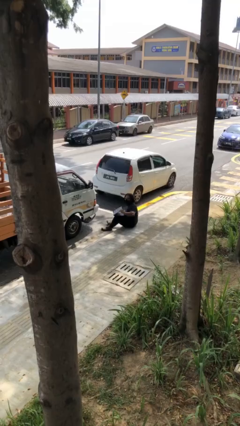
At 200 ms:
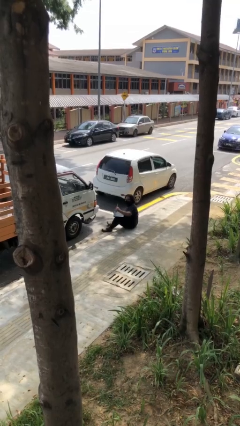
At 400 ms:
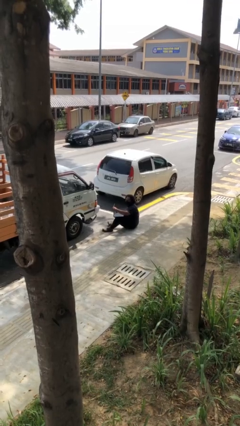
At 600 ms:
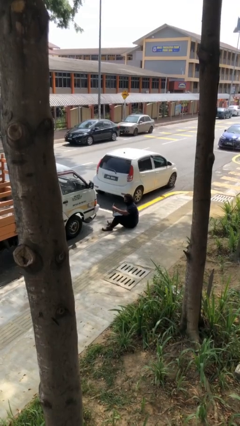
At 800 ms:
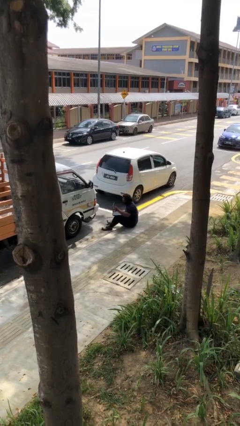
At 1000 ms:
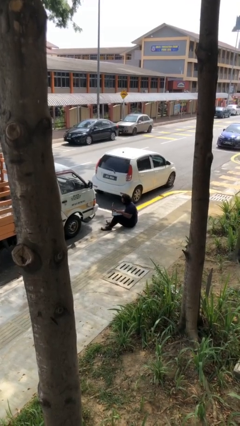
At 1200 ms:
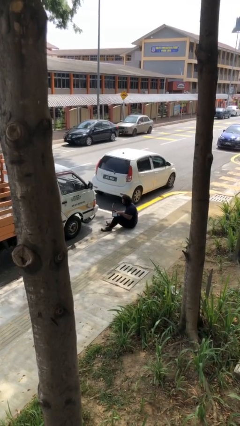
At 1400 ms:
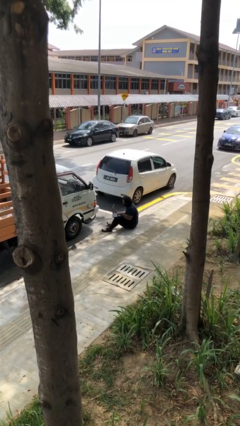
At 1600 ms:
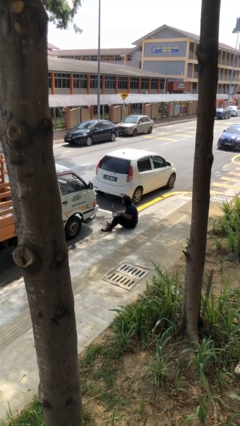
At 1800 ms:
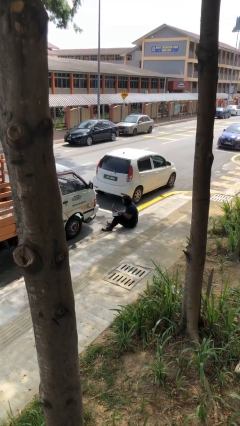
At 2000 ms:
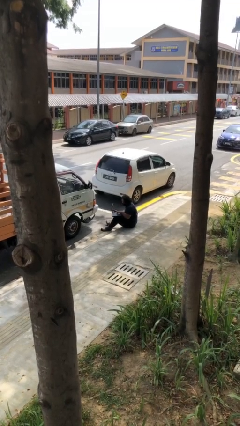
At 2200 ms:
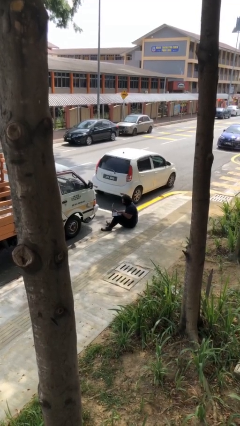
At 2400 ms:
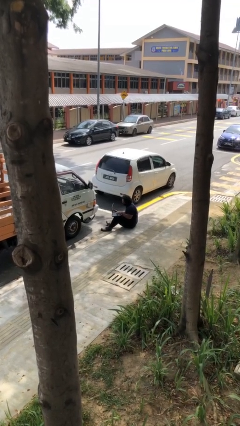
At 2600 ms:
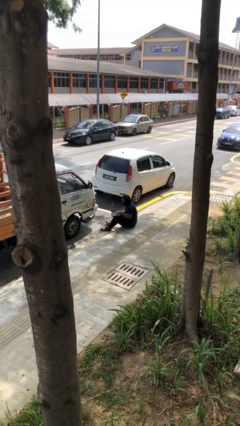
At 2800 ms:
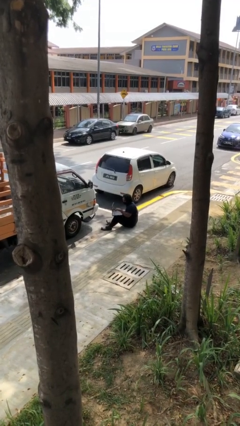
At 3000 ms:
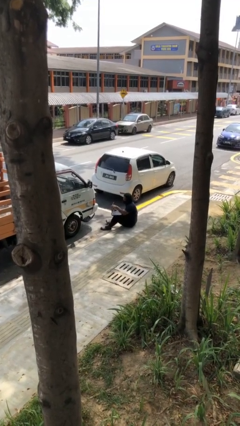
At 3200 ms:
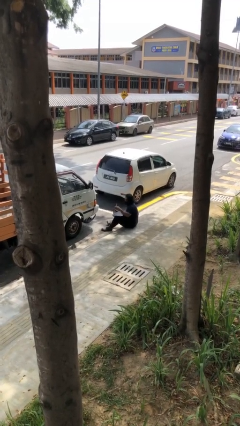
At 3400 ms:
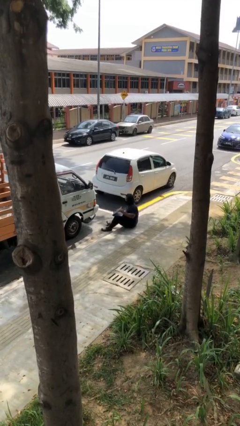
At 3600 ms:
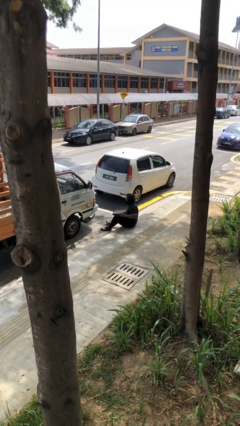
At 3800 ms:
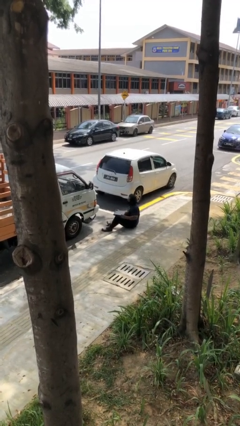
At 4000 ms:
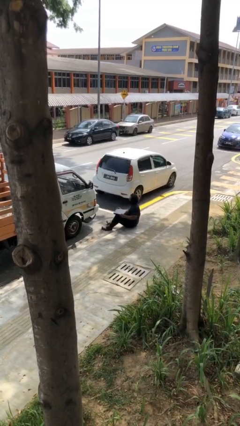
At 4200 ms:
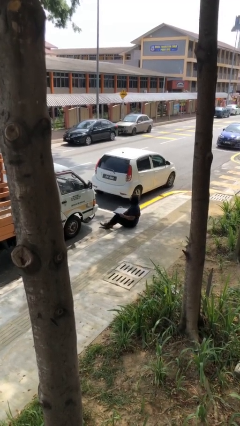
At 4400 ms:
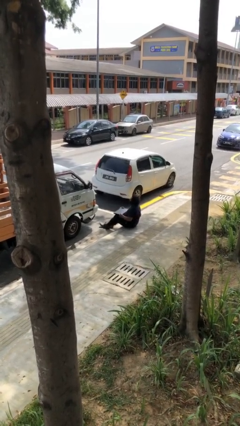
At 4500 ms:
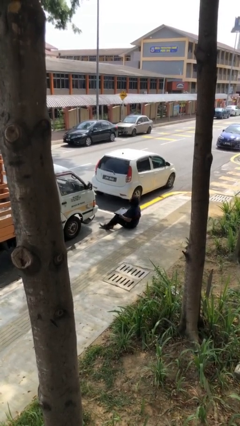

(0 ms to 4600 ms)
person interacts with laptop

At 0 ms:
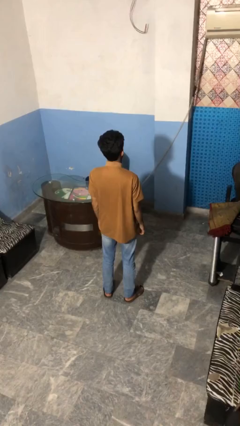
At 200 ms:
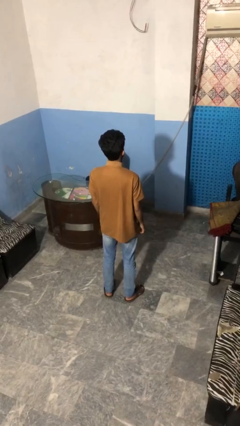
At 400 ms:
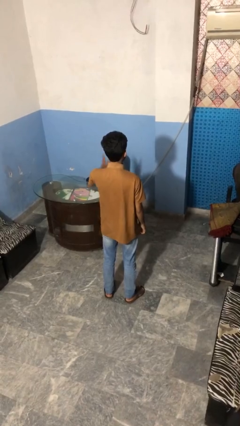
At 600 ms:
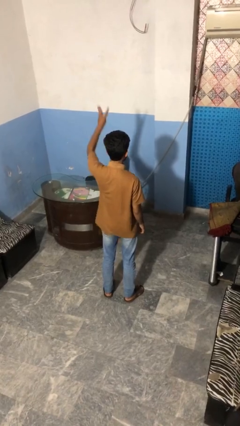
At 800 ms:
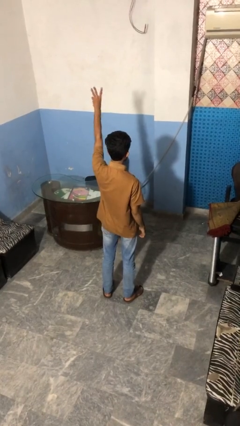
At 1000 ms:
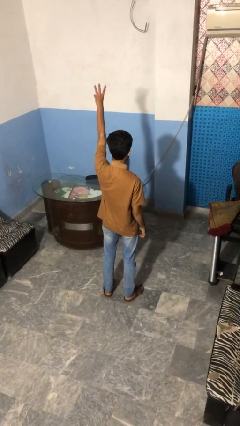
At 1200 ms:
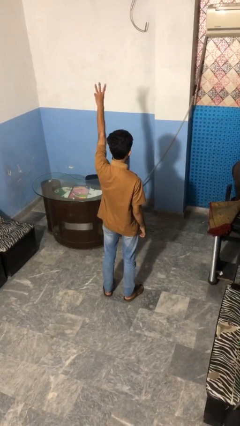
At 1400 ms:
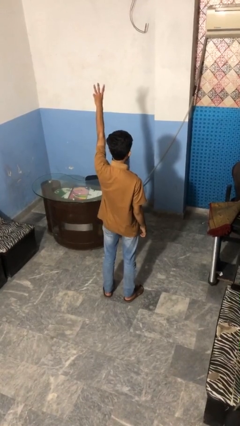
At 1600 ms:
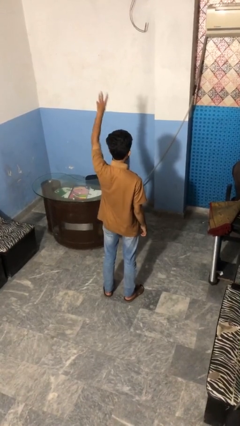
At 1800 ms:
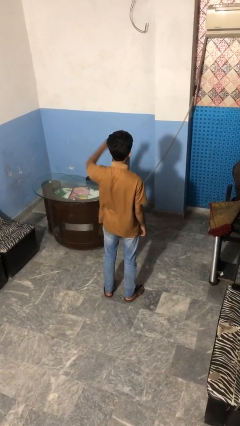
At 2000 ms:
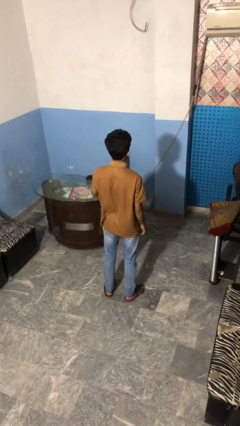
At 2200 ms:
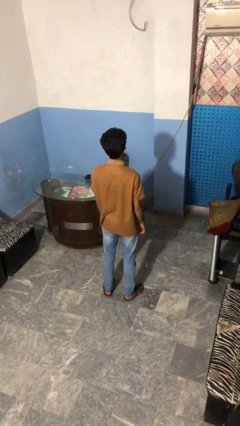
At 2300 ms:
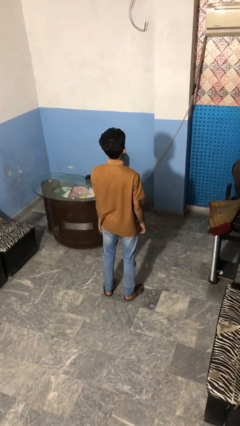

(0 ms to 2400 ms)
person gestures number three

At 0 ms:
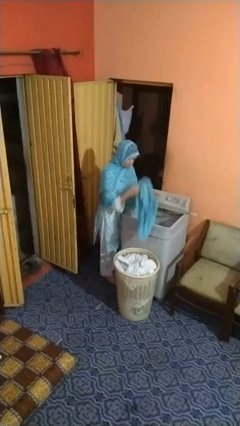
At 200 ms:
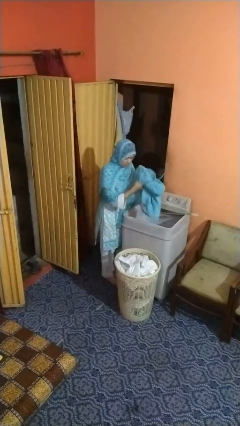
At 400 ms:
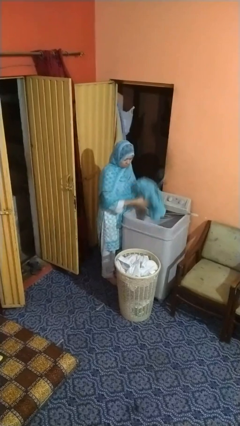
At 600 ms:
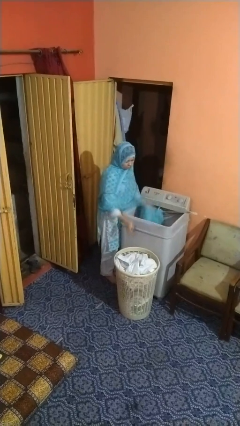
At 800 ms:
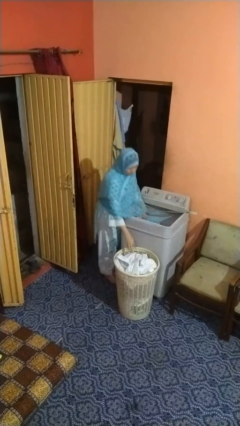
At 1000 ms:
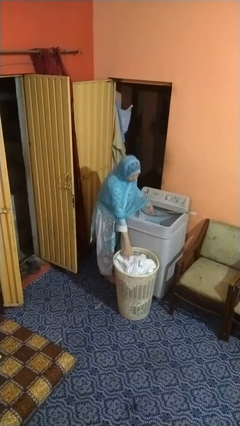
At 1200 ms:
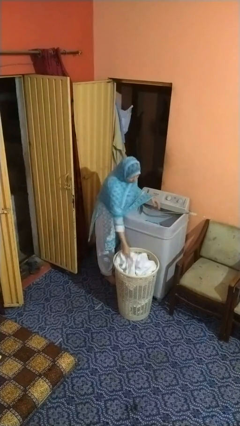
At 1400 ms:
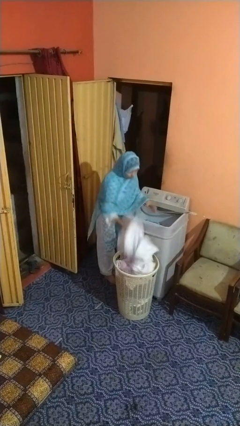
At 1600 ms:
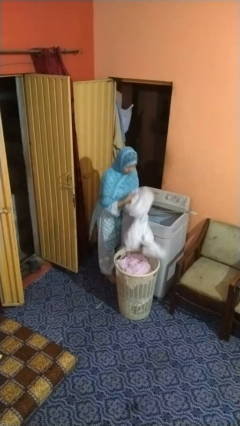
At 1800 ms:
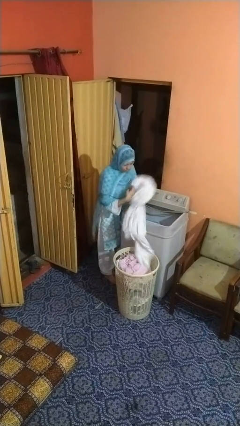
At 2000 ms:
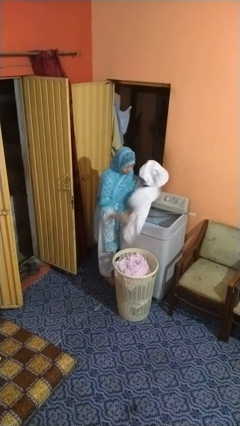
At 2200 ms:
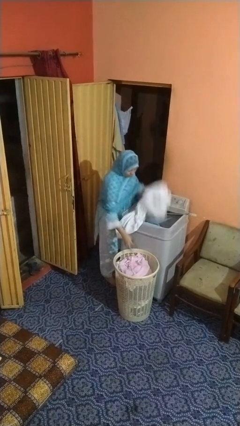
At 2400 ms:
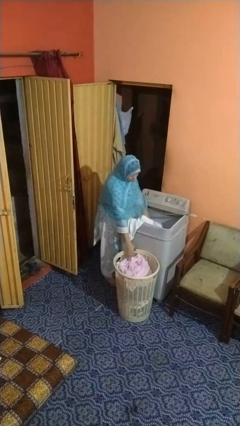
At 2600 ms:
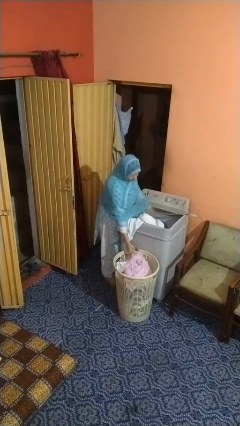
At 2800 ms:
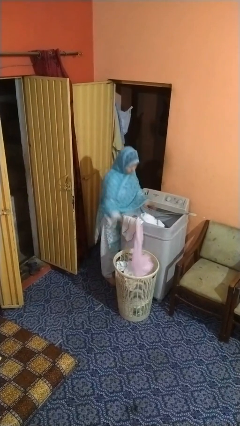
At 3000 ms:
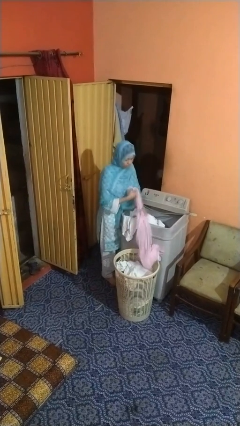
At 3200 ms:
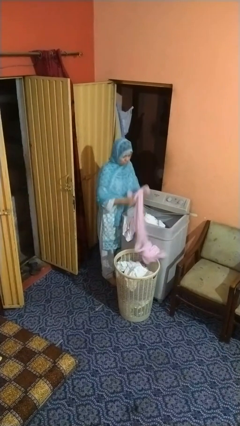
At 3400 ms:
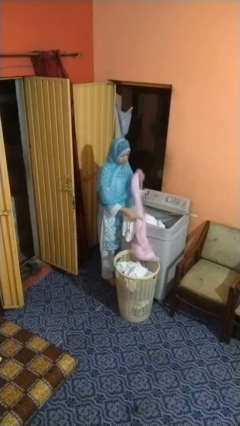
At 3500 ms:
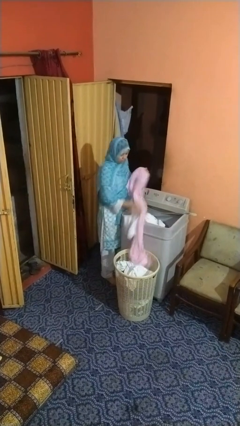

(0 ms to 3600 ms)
person loads clotheswasher

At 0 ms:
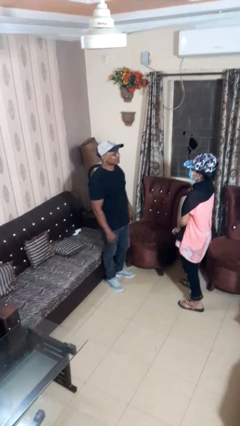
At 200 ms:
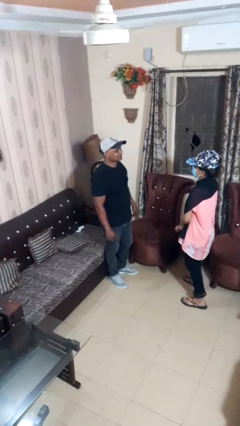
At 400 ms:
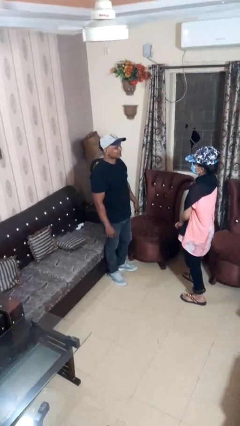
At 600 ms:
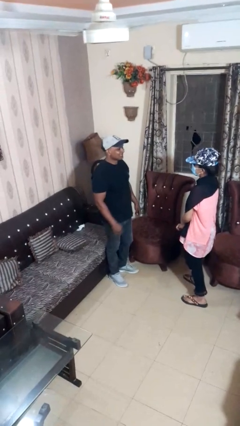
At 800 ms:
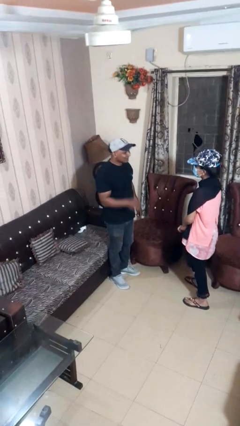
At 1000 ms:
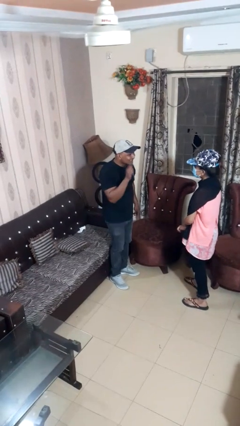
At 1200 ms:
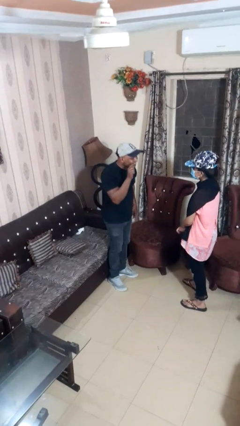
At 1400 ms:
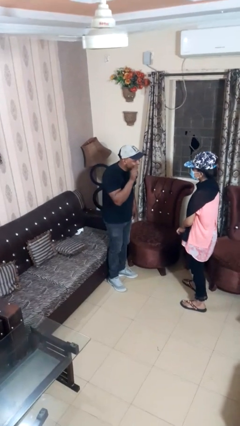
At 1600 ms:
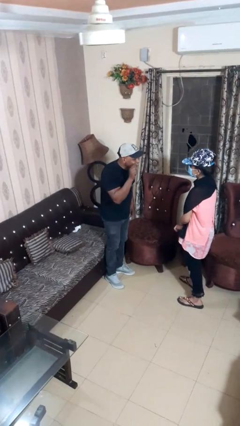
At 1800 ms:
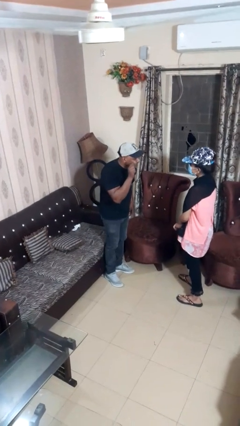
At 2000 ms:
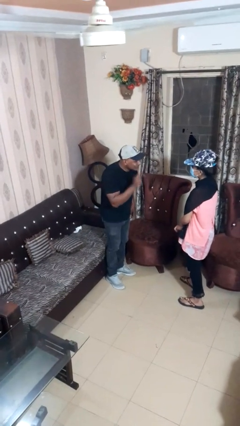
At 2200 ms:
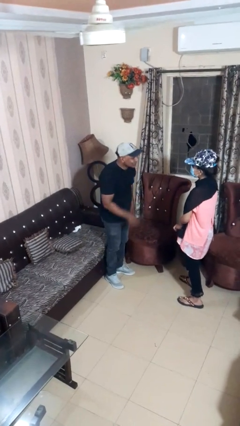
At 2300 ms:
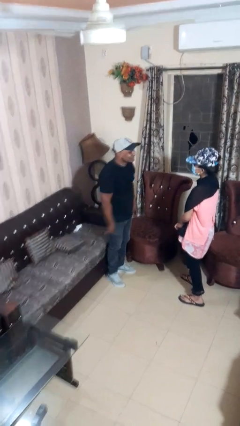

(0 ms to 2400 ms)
person points at person

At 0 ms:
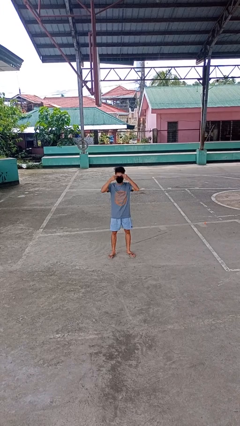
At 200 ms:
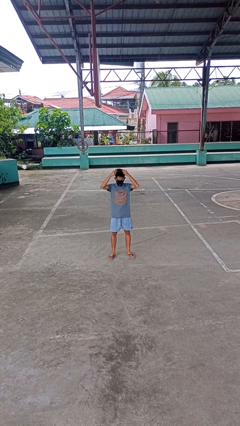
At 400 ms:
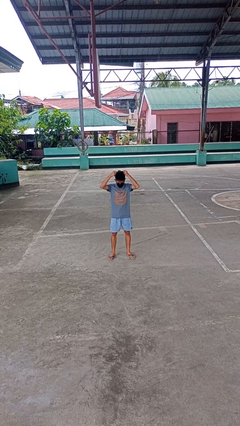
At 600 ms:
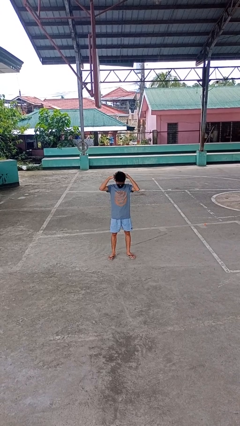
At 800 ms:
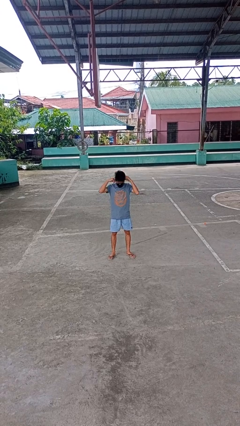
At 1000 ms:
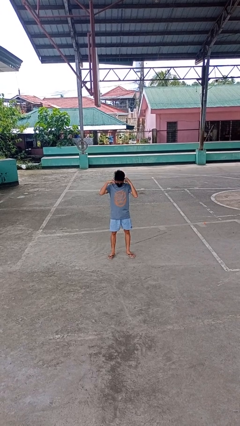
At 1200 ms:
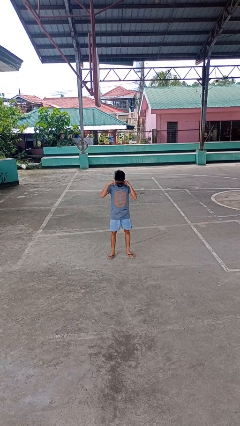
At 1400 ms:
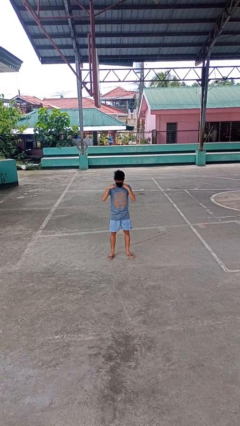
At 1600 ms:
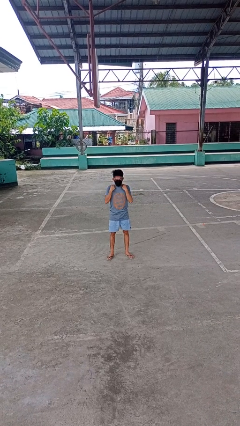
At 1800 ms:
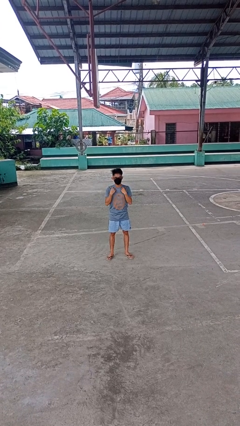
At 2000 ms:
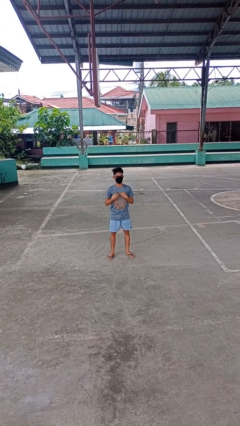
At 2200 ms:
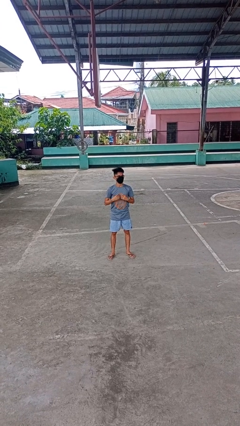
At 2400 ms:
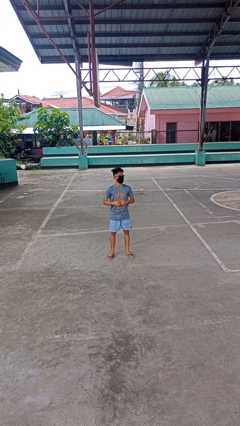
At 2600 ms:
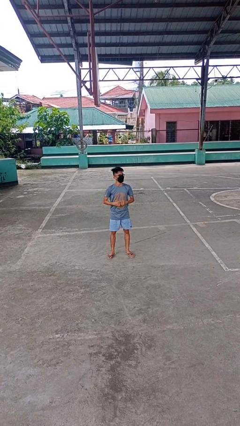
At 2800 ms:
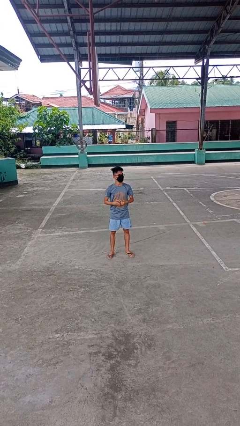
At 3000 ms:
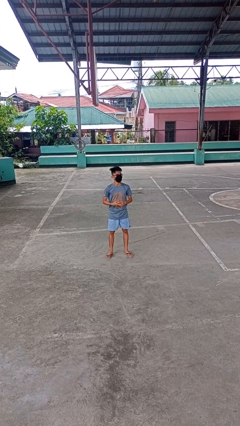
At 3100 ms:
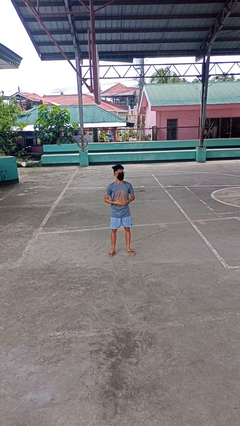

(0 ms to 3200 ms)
person puts on necklace

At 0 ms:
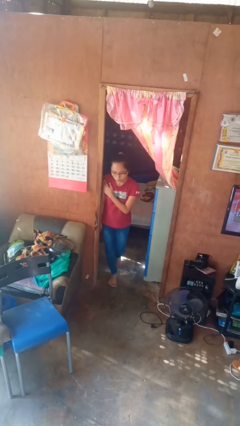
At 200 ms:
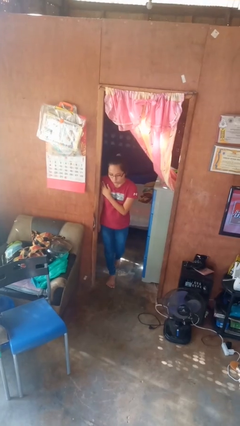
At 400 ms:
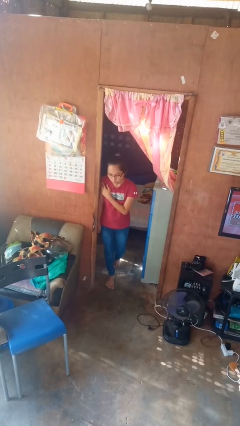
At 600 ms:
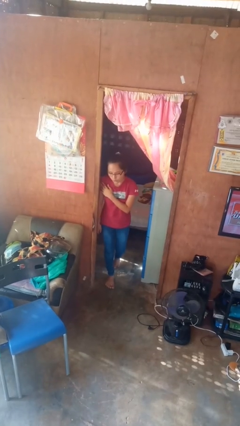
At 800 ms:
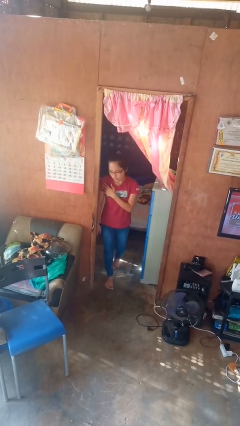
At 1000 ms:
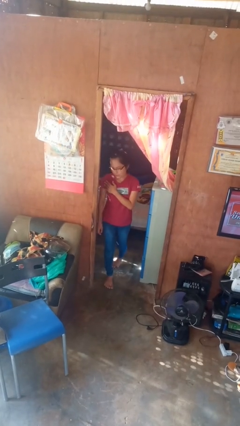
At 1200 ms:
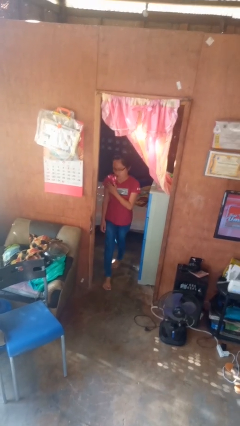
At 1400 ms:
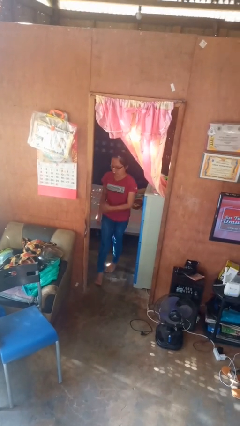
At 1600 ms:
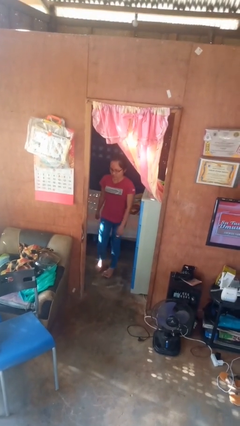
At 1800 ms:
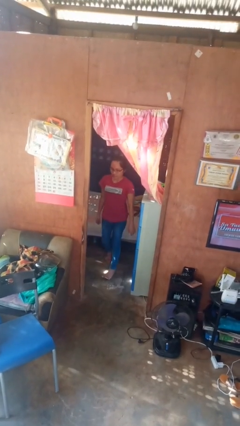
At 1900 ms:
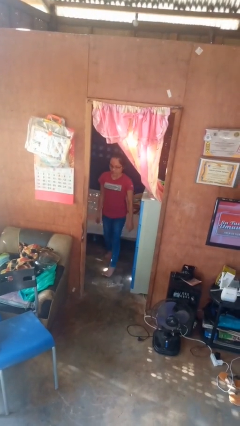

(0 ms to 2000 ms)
person bumps into wall
